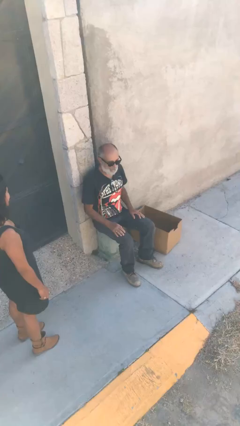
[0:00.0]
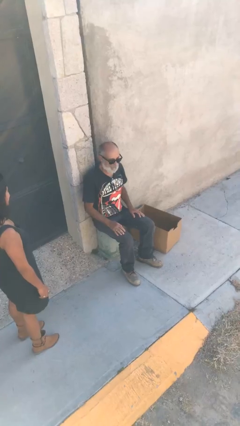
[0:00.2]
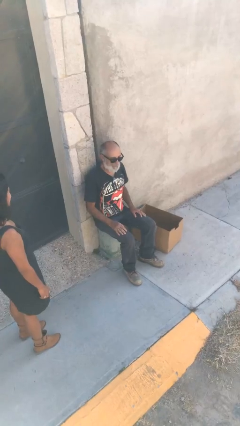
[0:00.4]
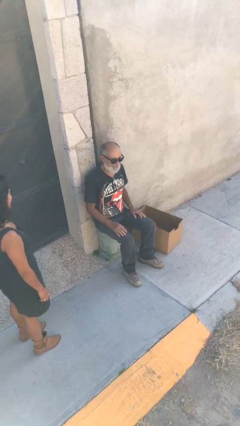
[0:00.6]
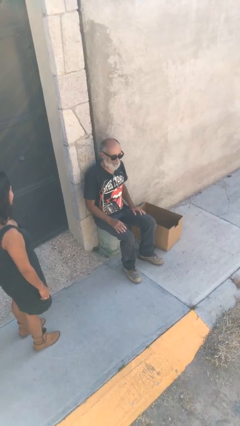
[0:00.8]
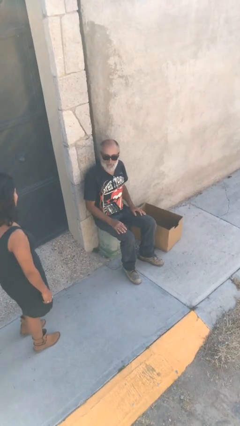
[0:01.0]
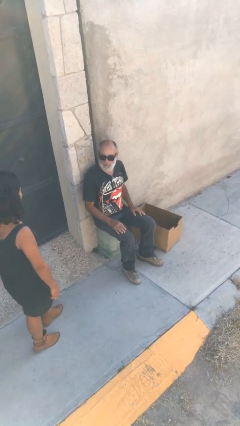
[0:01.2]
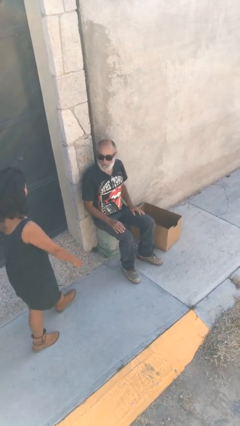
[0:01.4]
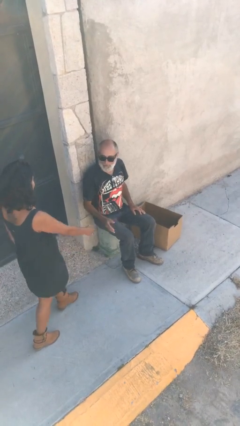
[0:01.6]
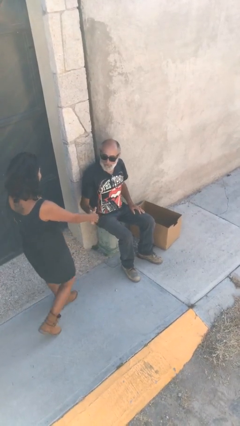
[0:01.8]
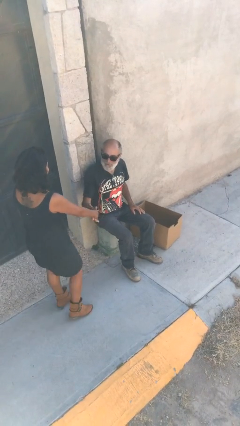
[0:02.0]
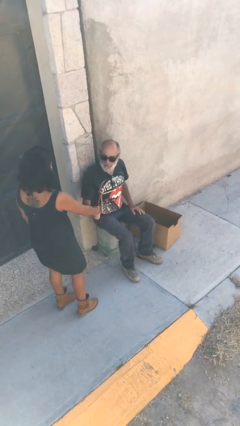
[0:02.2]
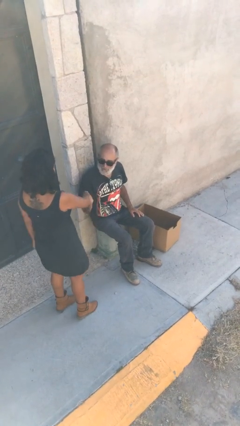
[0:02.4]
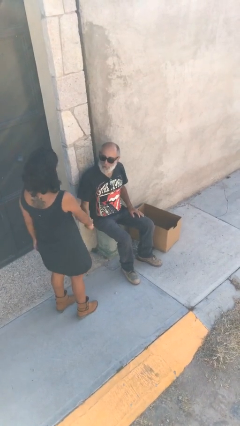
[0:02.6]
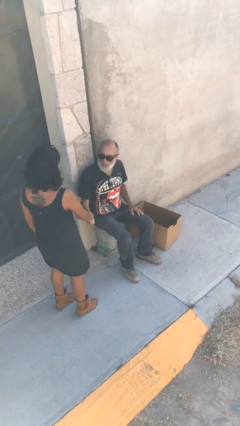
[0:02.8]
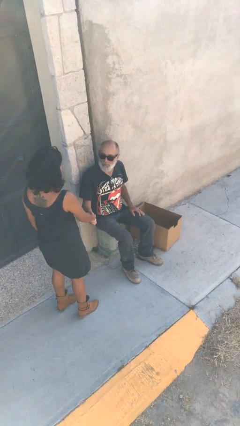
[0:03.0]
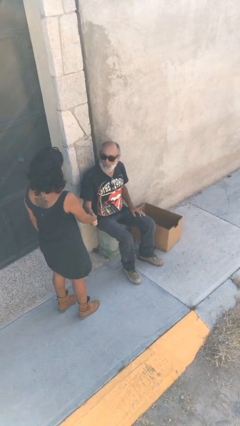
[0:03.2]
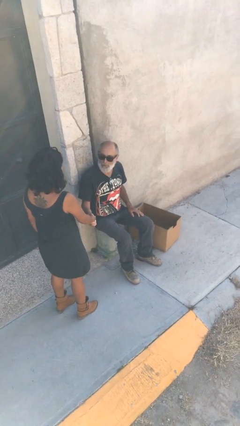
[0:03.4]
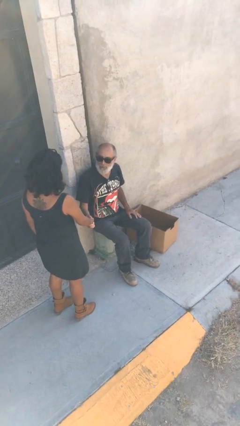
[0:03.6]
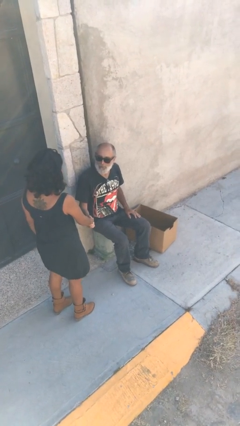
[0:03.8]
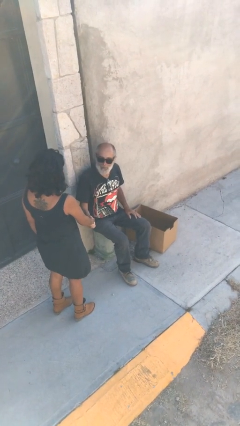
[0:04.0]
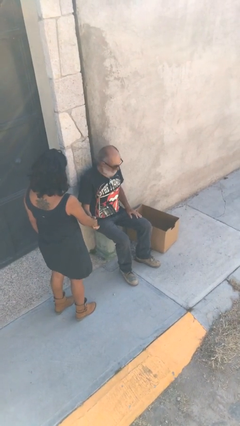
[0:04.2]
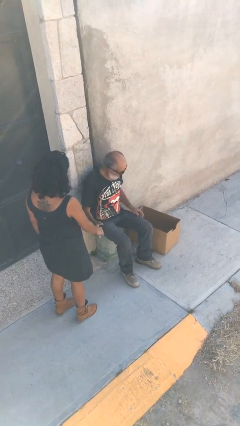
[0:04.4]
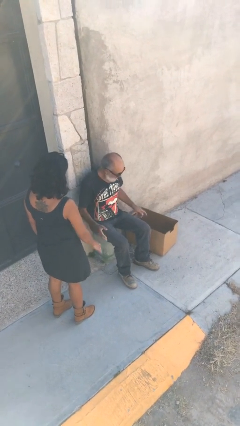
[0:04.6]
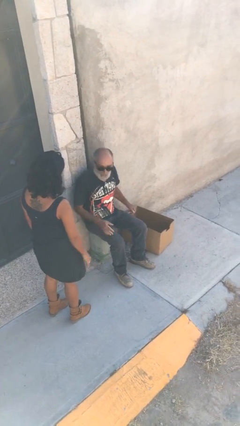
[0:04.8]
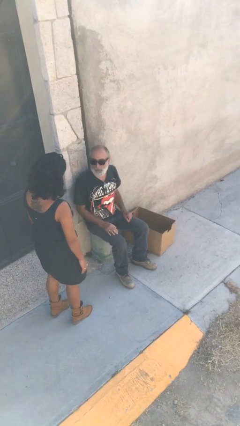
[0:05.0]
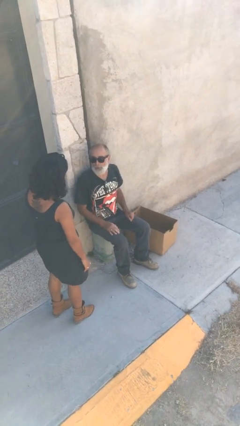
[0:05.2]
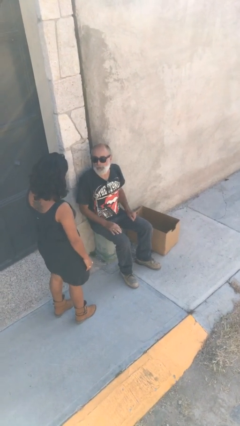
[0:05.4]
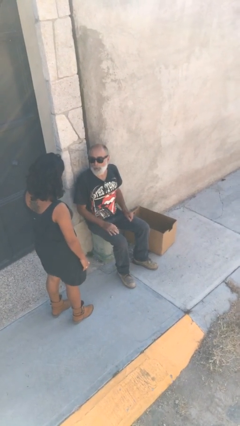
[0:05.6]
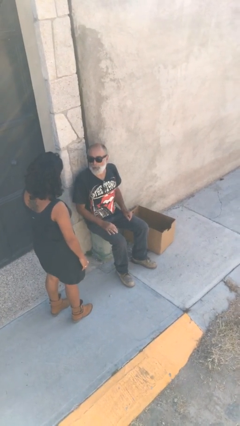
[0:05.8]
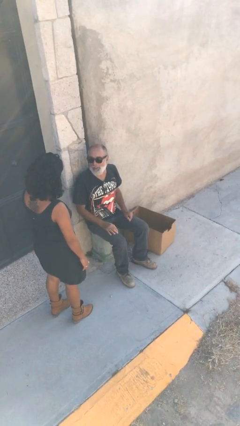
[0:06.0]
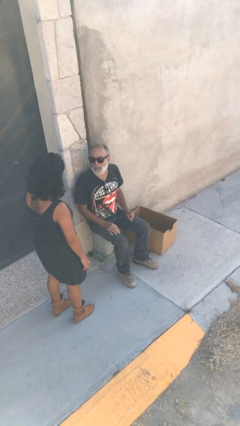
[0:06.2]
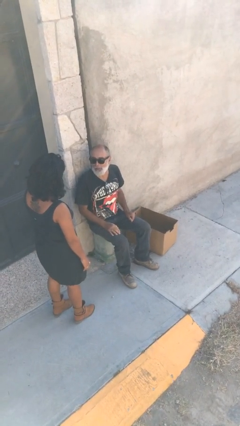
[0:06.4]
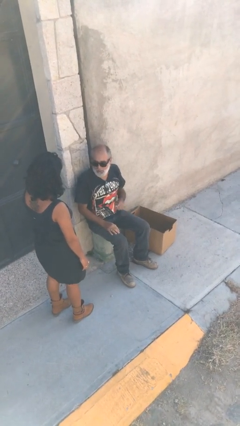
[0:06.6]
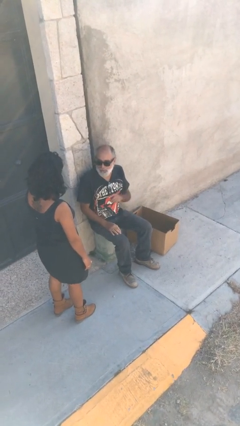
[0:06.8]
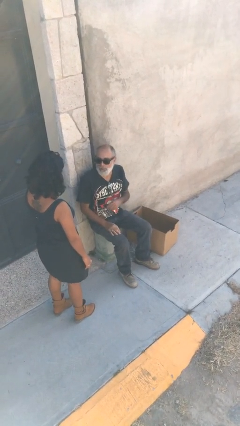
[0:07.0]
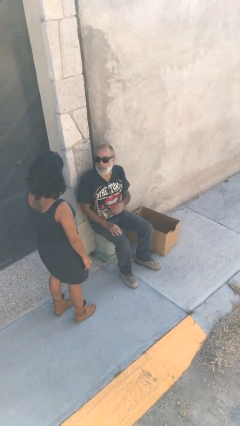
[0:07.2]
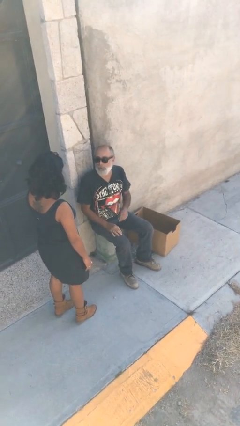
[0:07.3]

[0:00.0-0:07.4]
person shakes hand

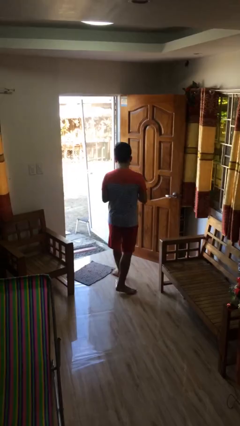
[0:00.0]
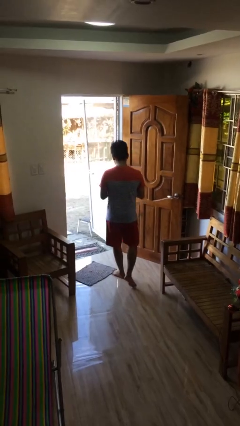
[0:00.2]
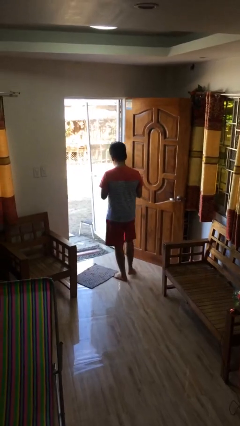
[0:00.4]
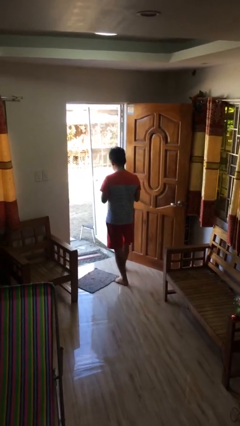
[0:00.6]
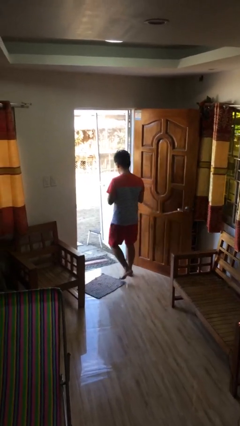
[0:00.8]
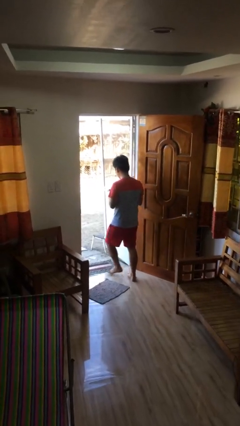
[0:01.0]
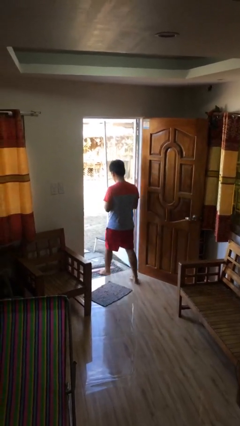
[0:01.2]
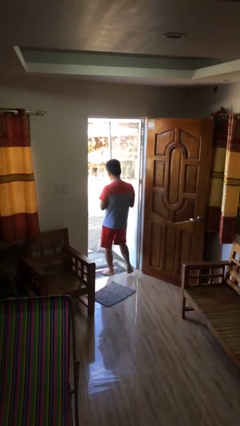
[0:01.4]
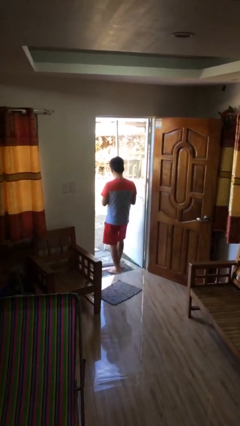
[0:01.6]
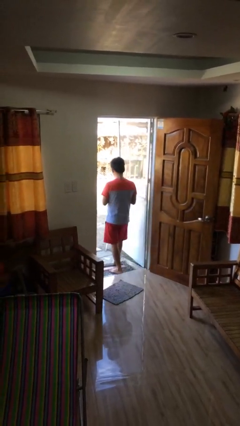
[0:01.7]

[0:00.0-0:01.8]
person exits scene through structure

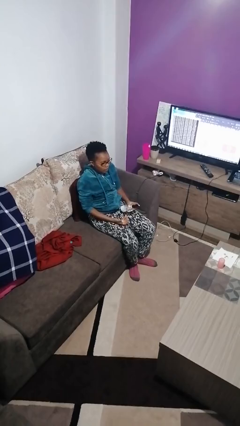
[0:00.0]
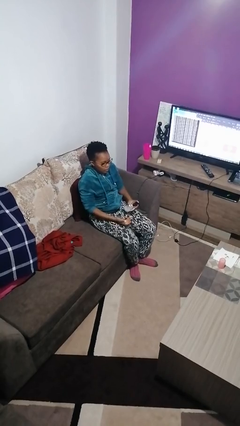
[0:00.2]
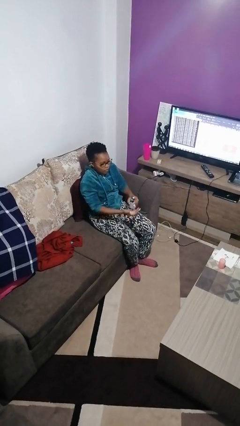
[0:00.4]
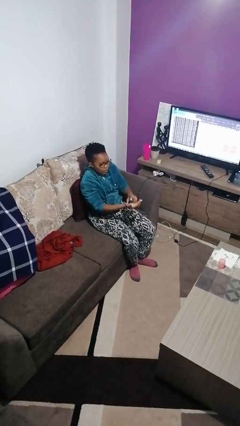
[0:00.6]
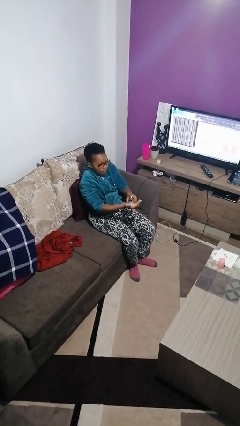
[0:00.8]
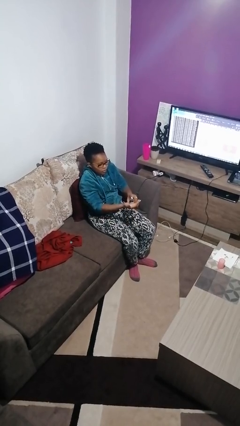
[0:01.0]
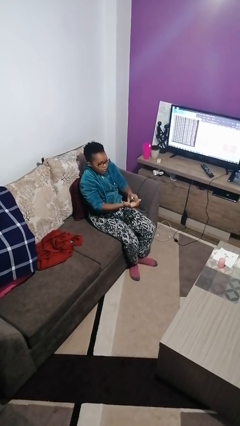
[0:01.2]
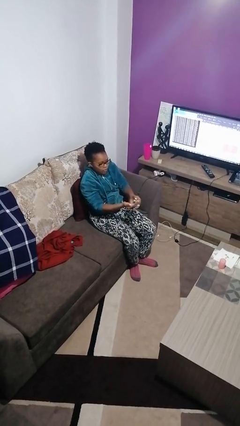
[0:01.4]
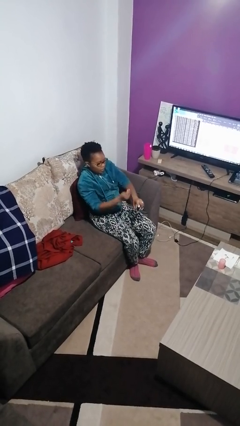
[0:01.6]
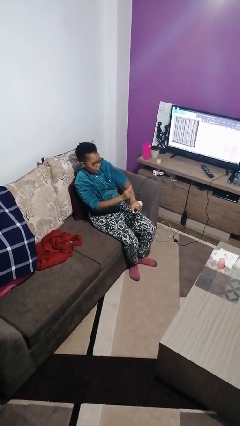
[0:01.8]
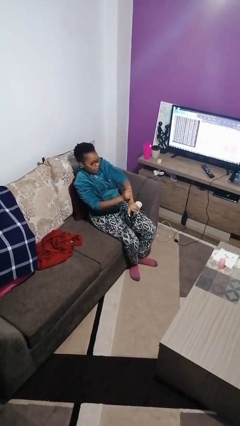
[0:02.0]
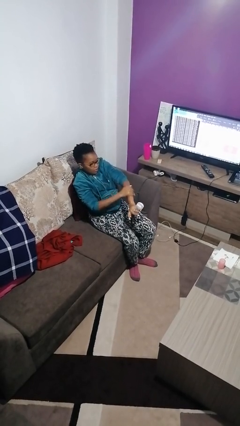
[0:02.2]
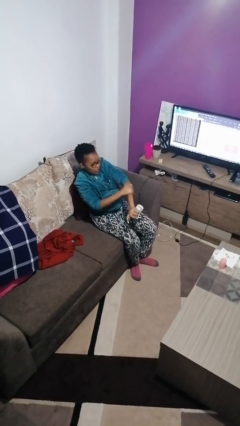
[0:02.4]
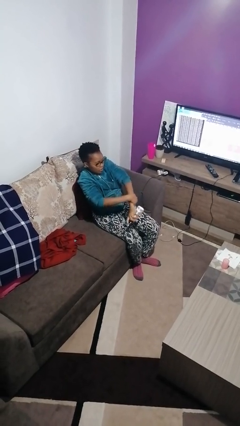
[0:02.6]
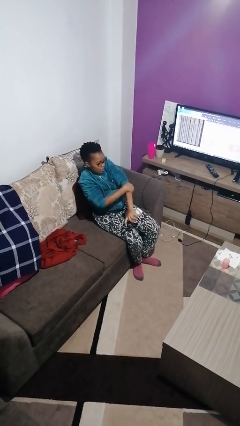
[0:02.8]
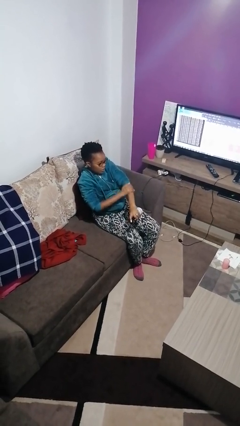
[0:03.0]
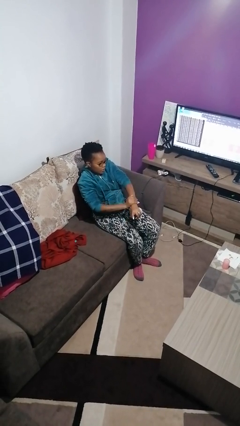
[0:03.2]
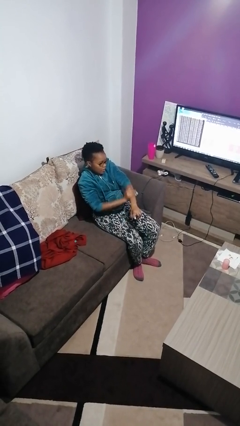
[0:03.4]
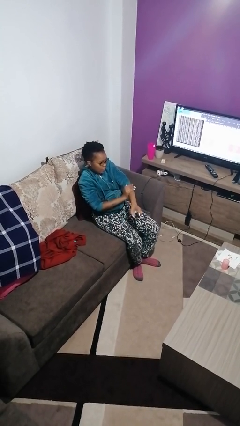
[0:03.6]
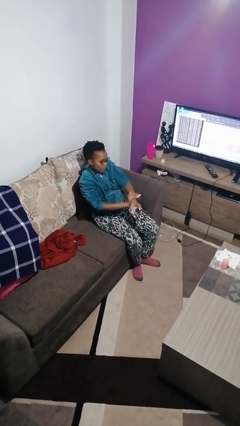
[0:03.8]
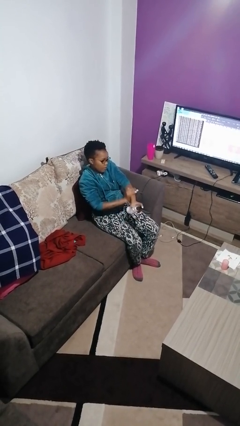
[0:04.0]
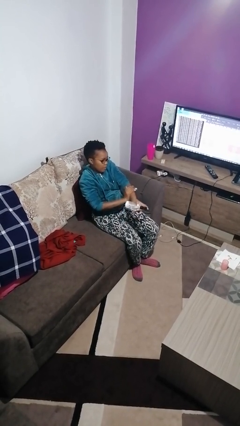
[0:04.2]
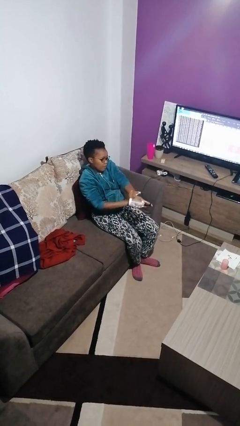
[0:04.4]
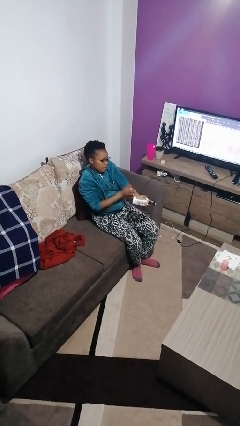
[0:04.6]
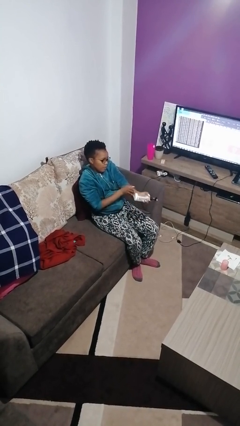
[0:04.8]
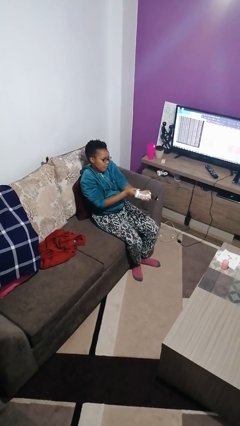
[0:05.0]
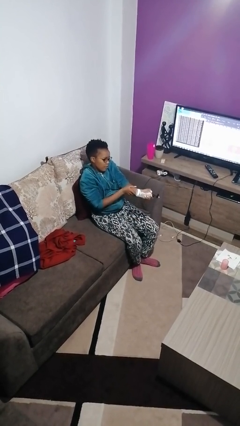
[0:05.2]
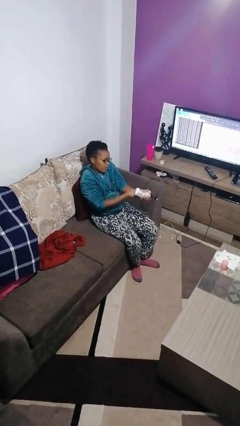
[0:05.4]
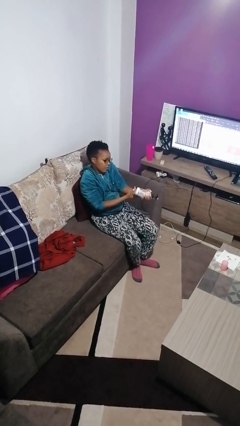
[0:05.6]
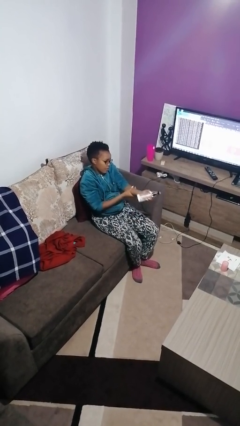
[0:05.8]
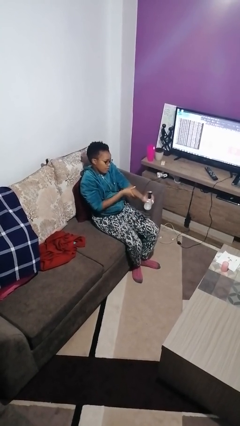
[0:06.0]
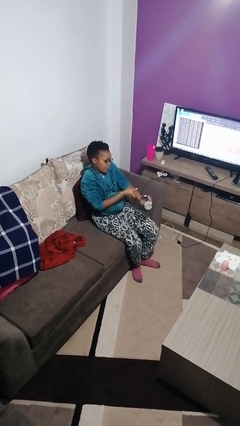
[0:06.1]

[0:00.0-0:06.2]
person applies sunscreen

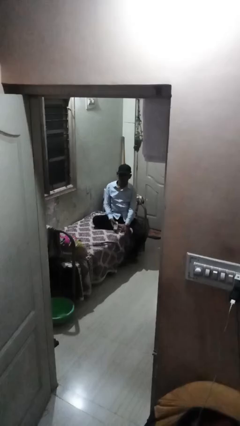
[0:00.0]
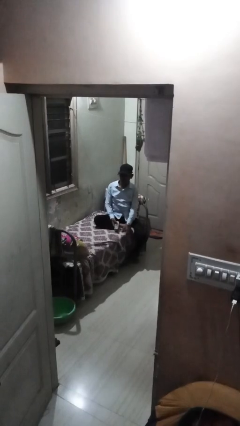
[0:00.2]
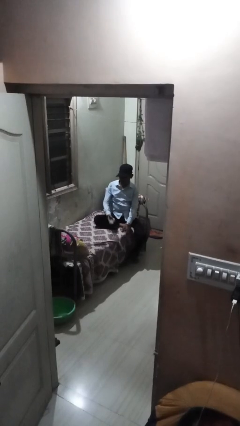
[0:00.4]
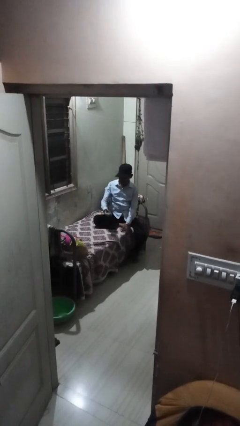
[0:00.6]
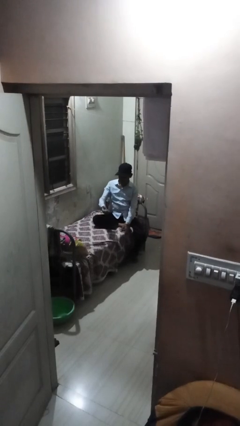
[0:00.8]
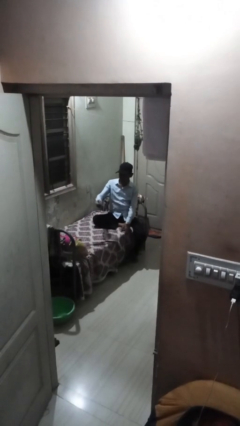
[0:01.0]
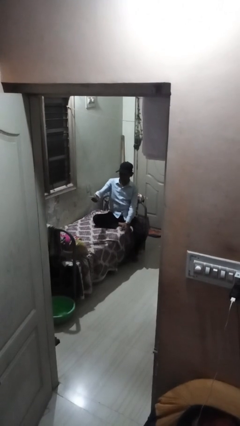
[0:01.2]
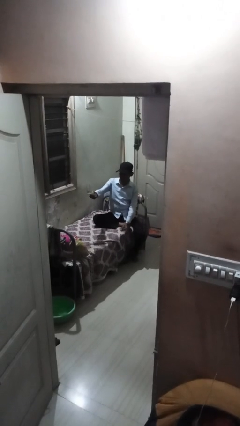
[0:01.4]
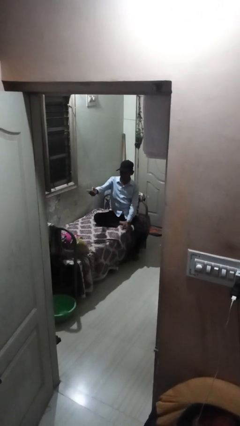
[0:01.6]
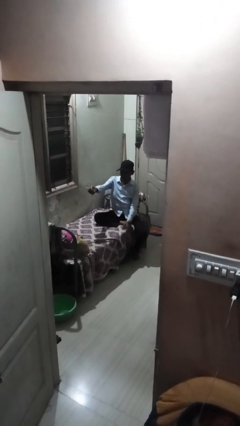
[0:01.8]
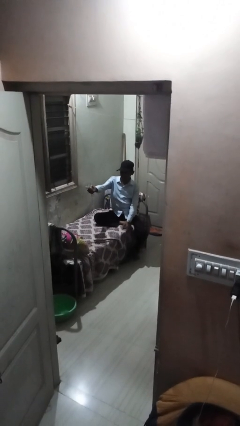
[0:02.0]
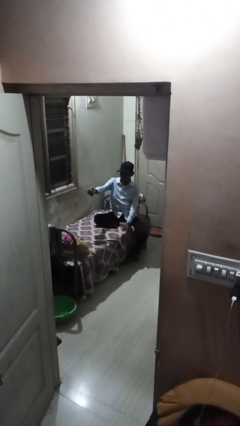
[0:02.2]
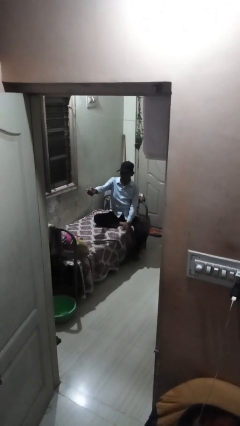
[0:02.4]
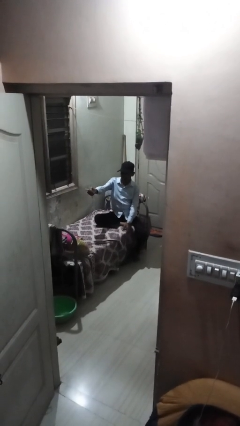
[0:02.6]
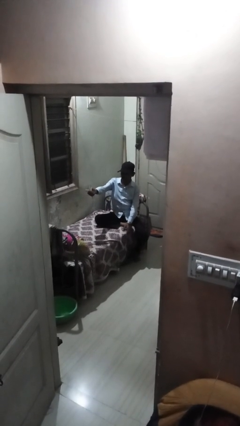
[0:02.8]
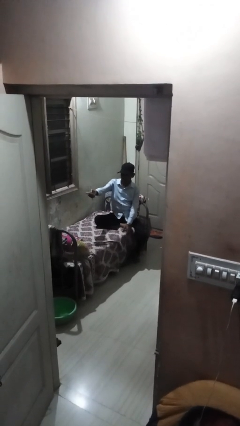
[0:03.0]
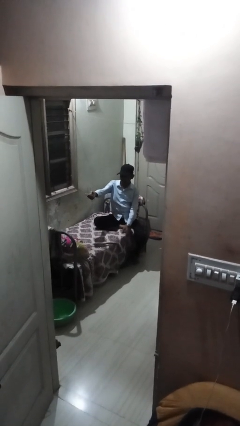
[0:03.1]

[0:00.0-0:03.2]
person uses television remote
